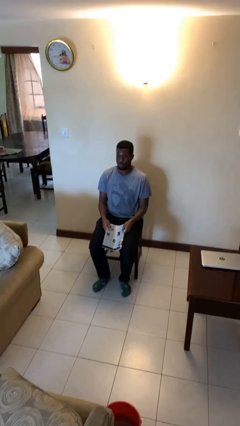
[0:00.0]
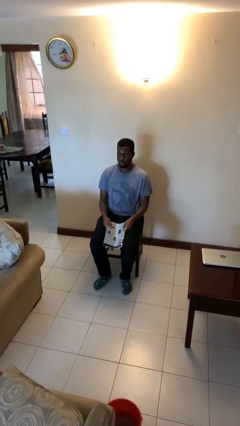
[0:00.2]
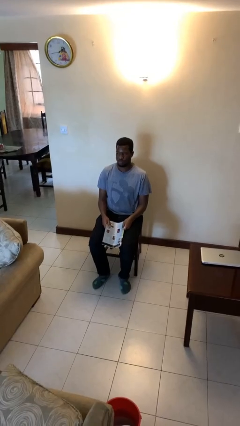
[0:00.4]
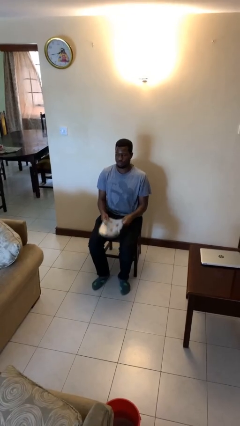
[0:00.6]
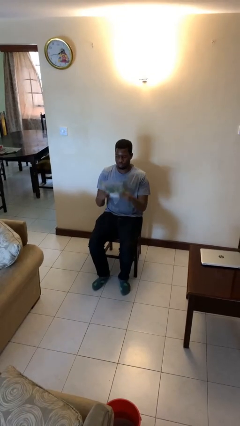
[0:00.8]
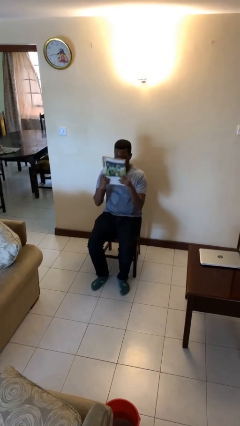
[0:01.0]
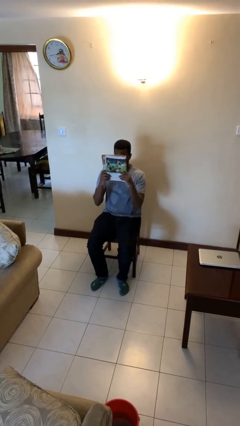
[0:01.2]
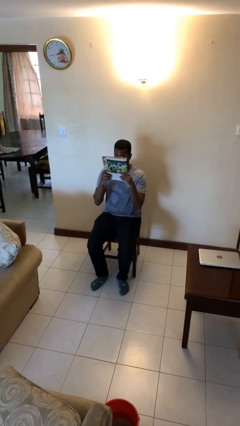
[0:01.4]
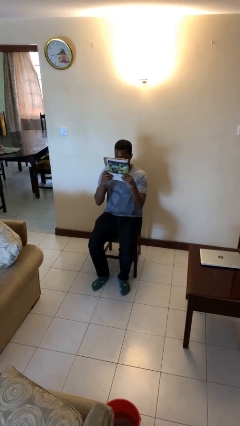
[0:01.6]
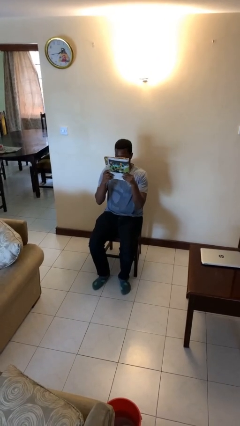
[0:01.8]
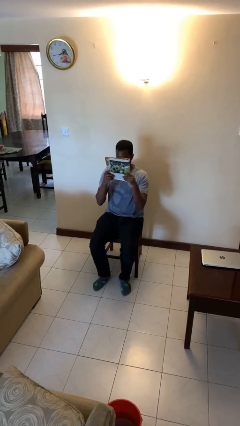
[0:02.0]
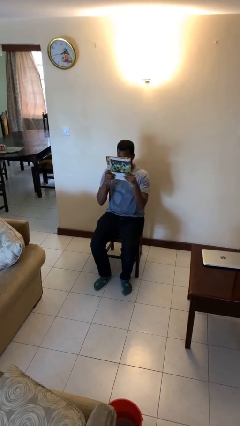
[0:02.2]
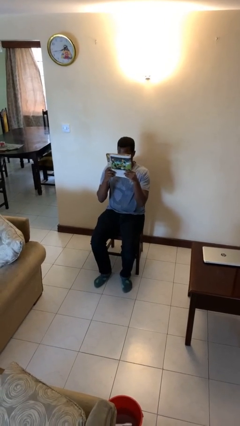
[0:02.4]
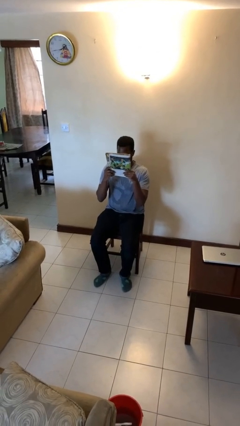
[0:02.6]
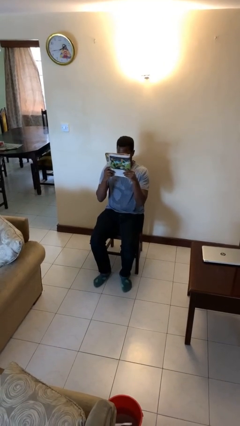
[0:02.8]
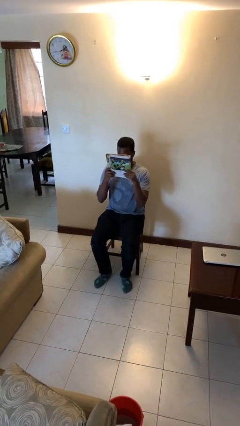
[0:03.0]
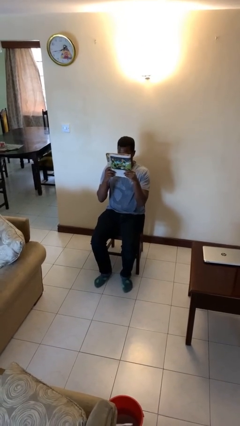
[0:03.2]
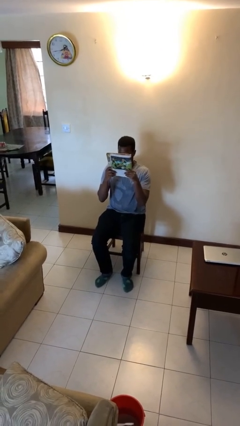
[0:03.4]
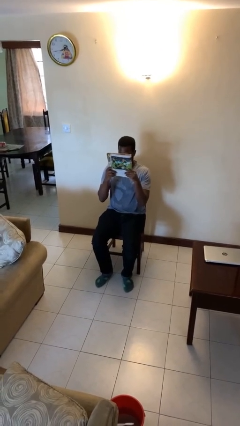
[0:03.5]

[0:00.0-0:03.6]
person reads document

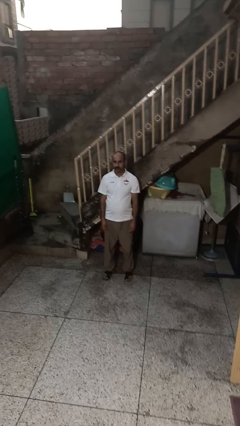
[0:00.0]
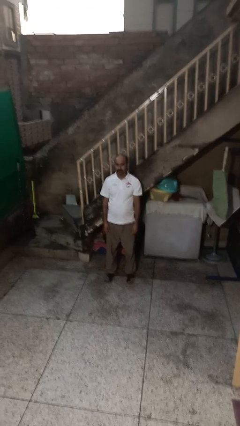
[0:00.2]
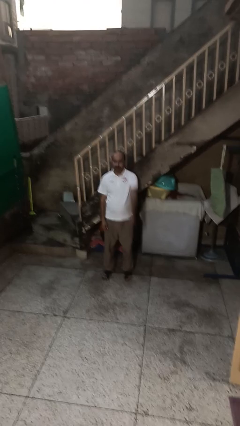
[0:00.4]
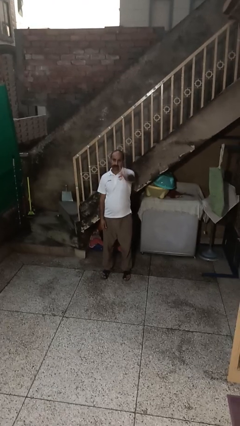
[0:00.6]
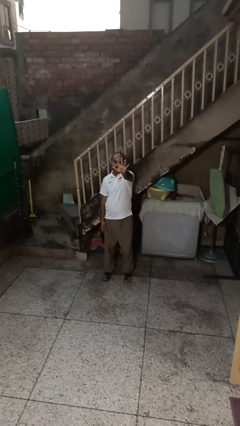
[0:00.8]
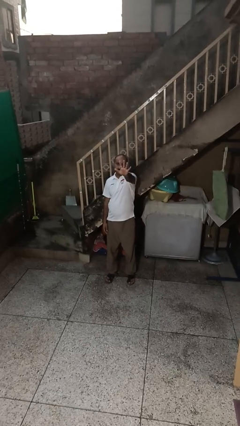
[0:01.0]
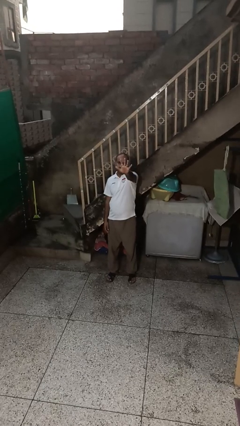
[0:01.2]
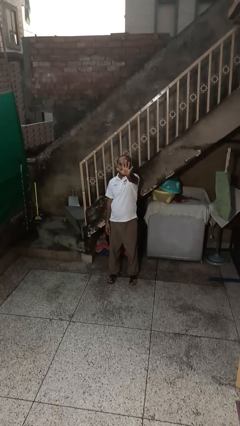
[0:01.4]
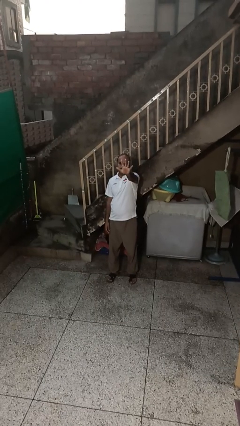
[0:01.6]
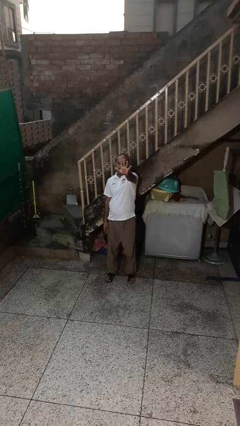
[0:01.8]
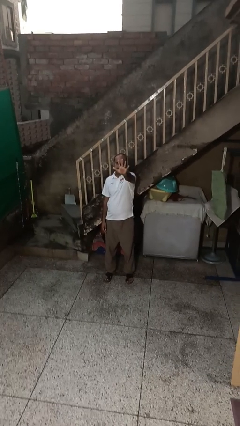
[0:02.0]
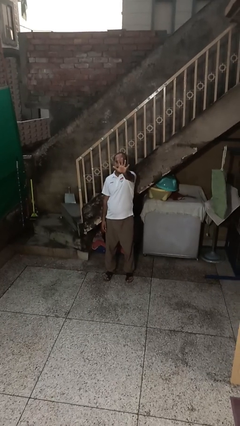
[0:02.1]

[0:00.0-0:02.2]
person gestures number five

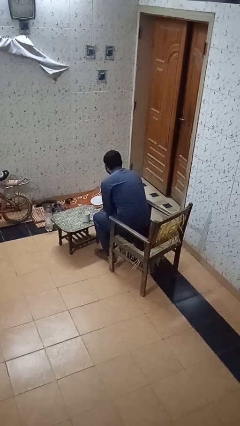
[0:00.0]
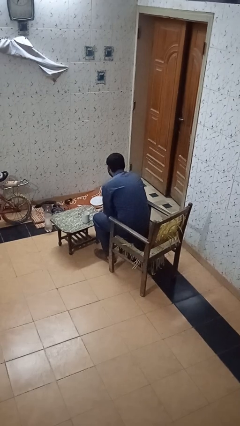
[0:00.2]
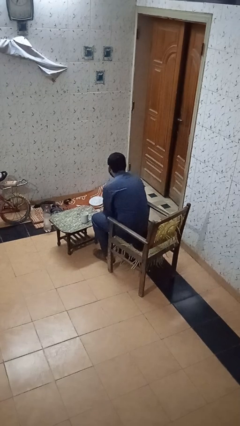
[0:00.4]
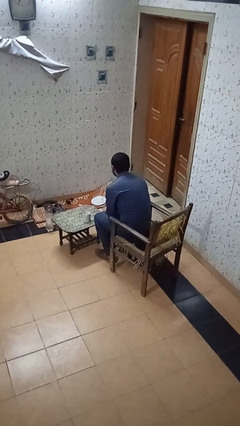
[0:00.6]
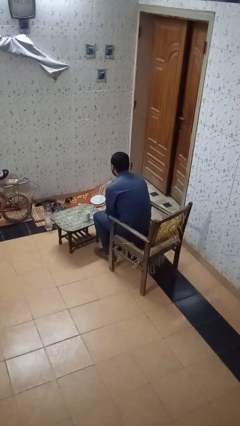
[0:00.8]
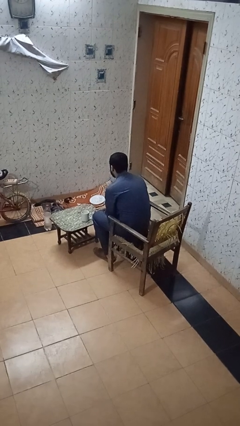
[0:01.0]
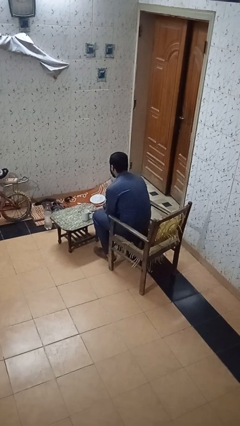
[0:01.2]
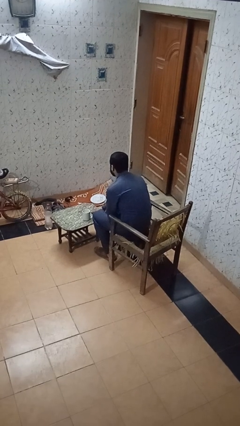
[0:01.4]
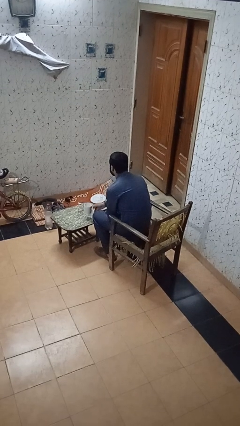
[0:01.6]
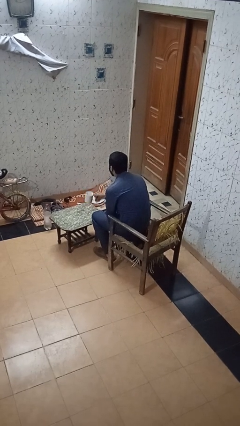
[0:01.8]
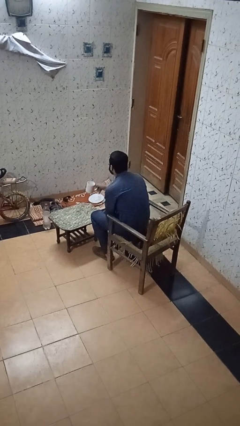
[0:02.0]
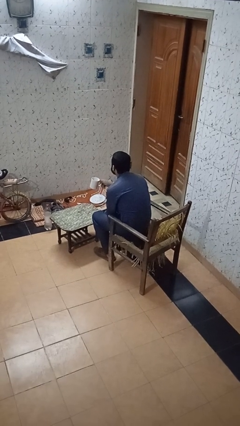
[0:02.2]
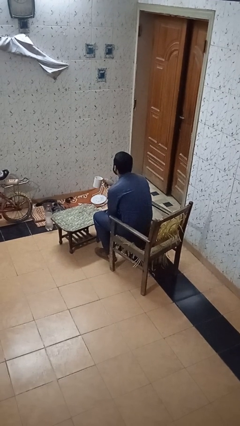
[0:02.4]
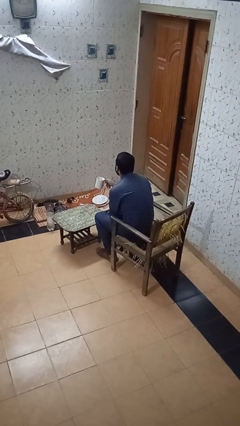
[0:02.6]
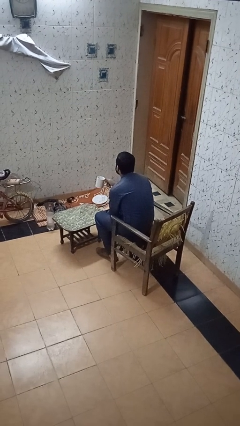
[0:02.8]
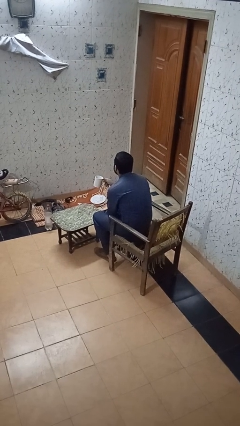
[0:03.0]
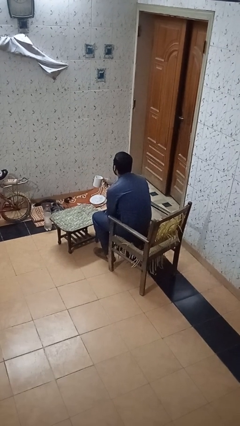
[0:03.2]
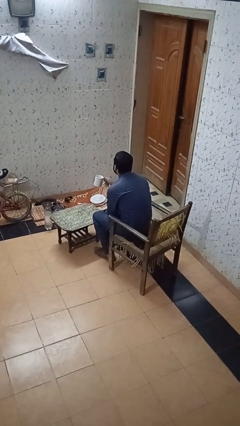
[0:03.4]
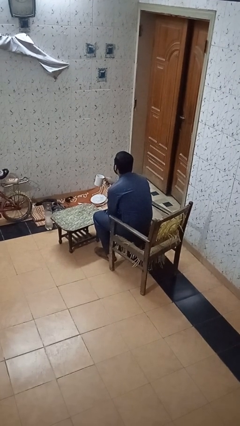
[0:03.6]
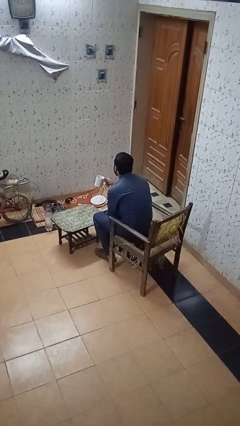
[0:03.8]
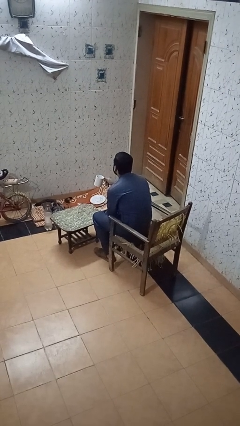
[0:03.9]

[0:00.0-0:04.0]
person picks up object from table

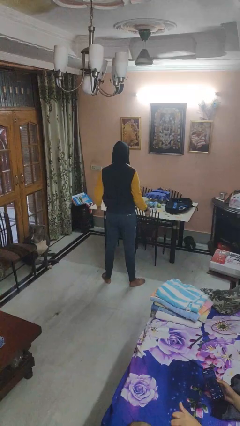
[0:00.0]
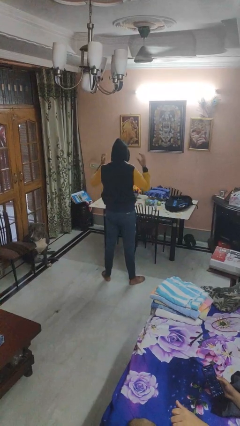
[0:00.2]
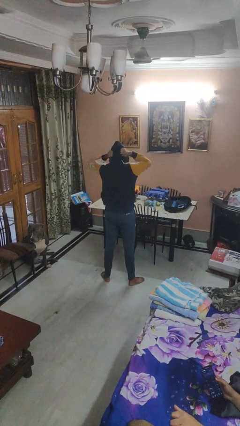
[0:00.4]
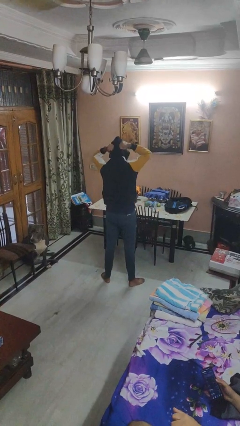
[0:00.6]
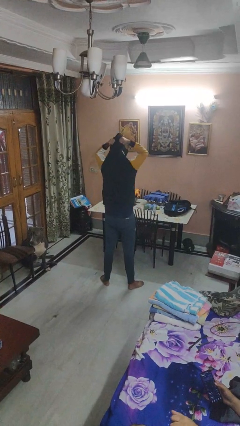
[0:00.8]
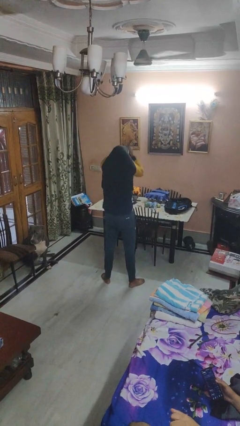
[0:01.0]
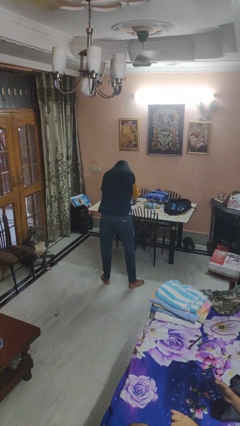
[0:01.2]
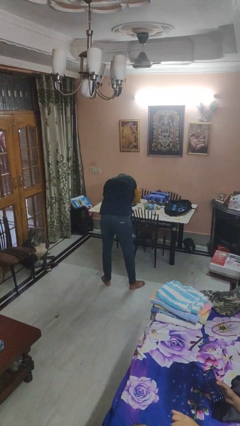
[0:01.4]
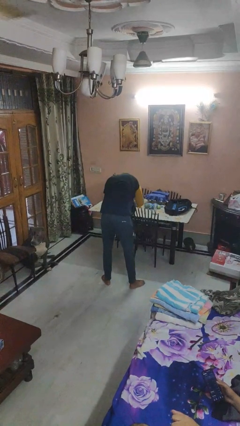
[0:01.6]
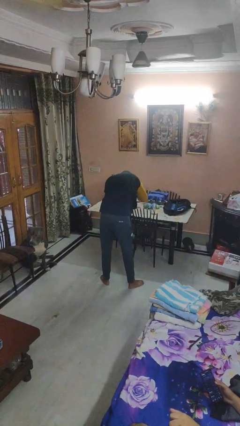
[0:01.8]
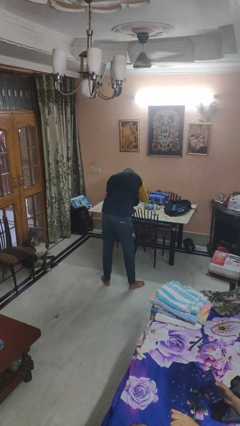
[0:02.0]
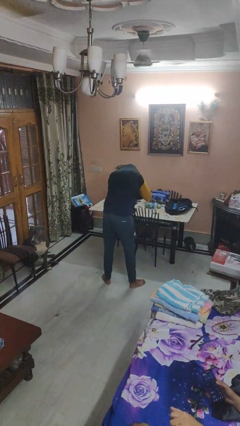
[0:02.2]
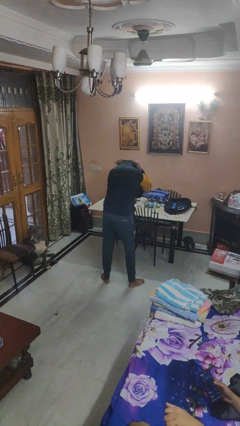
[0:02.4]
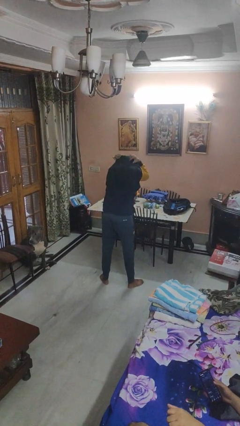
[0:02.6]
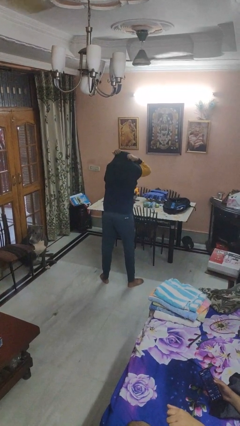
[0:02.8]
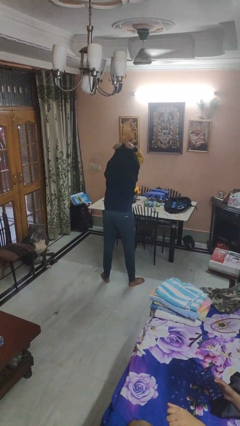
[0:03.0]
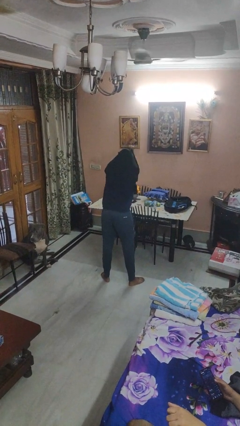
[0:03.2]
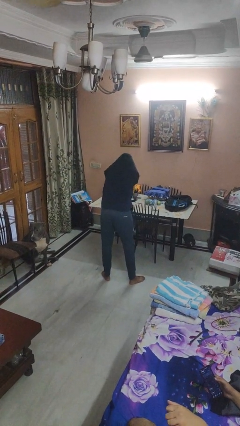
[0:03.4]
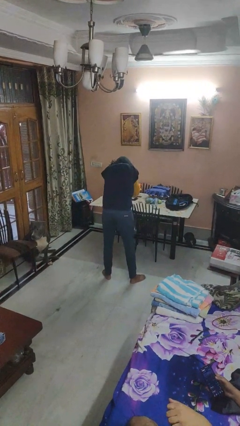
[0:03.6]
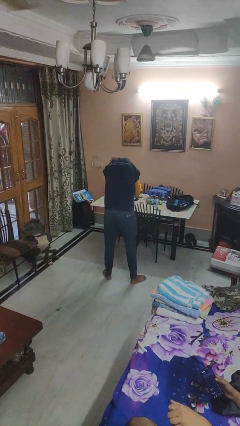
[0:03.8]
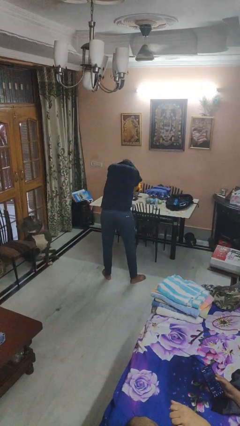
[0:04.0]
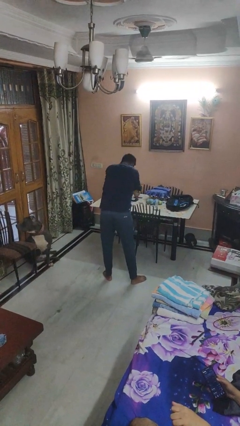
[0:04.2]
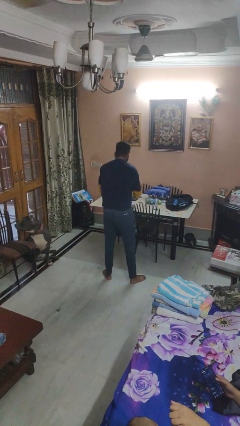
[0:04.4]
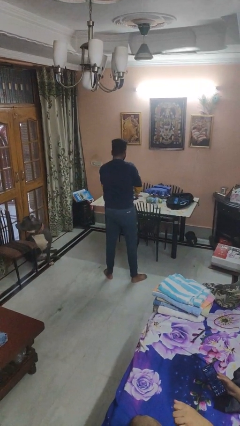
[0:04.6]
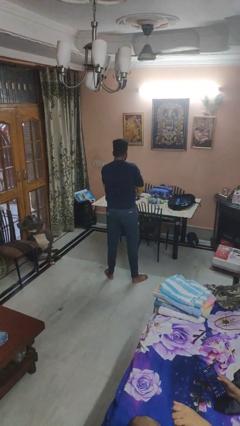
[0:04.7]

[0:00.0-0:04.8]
person takes off hoodie

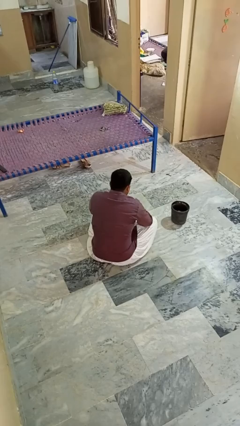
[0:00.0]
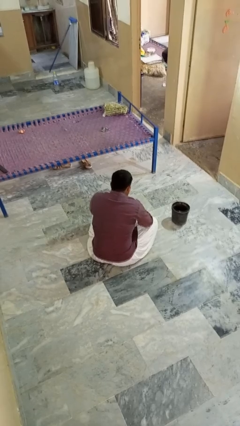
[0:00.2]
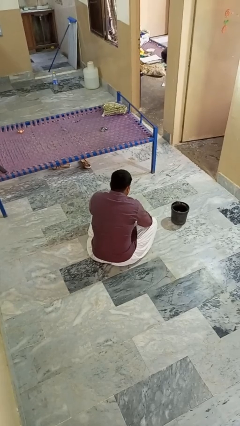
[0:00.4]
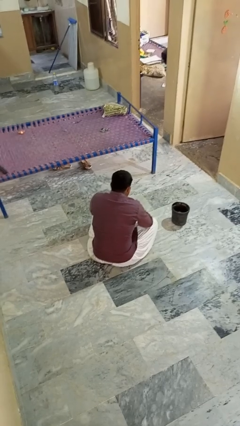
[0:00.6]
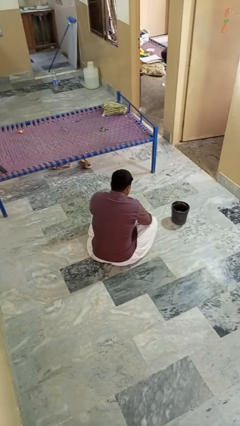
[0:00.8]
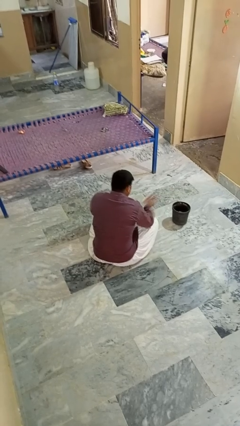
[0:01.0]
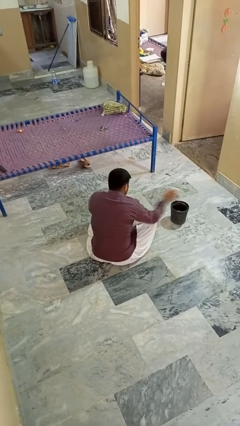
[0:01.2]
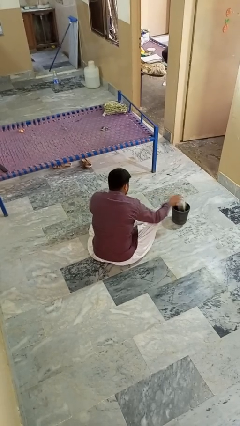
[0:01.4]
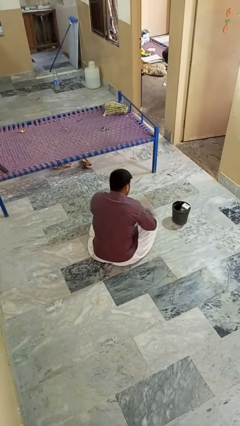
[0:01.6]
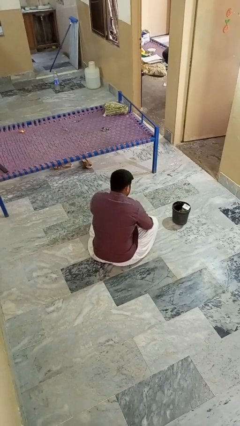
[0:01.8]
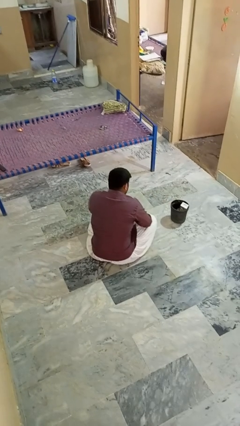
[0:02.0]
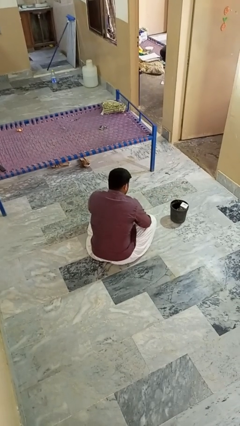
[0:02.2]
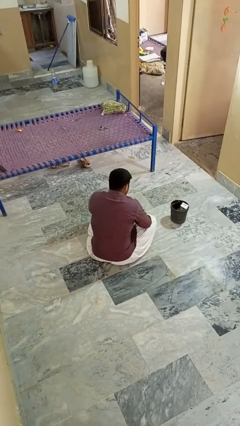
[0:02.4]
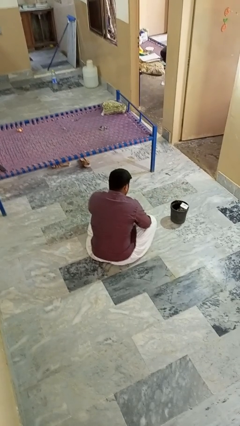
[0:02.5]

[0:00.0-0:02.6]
person puts object into basket

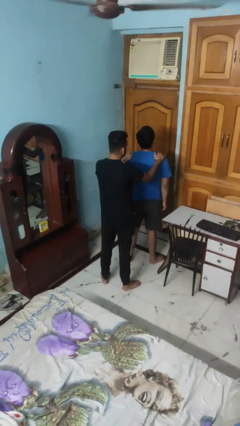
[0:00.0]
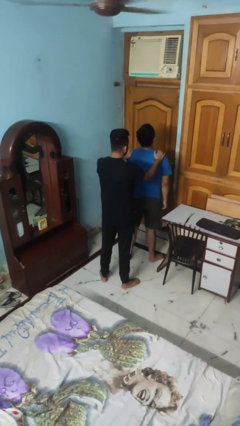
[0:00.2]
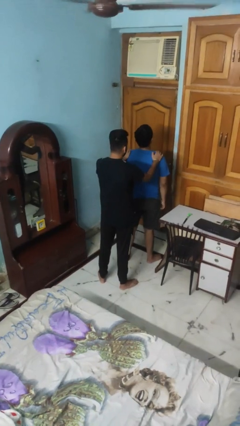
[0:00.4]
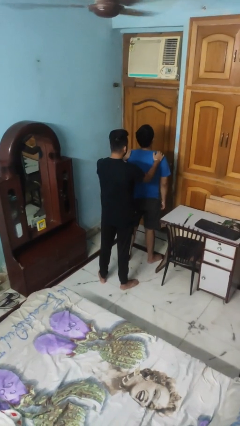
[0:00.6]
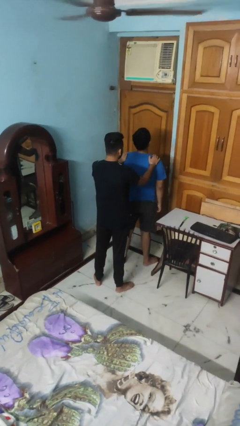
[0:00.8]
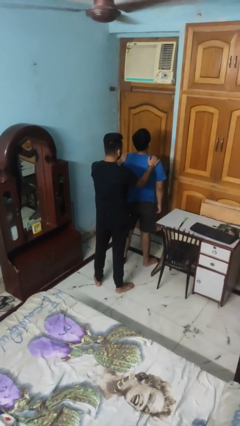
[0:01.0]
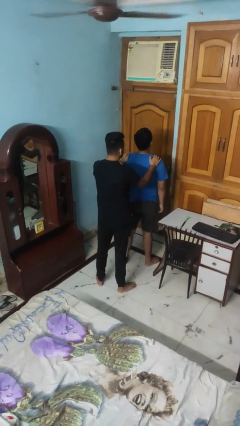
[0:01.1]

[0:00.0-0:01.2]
person grabs person by shoulder
